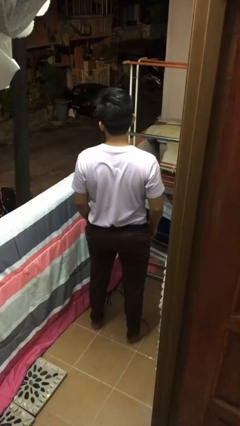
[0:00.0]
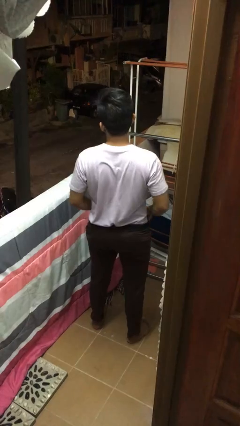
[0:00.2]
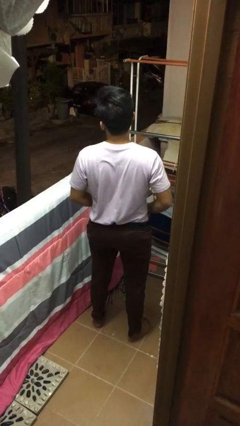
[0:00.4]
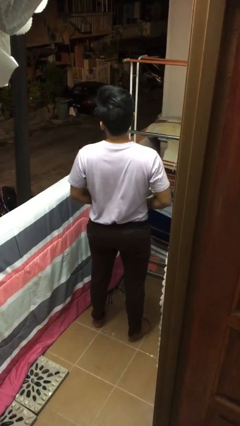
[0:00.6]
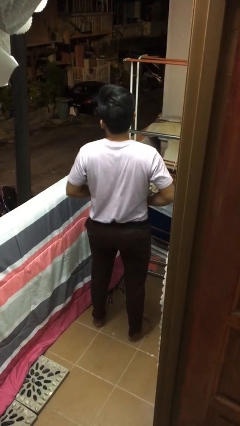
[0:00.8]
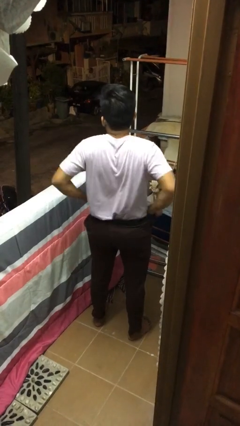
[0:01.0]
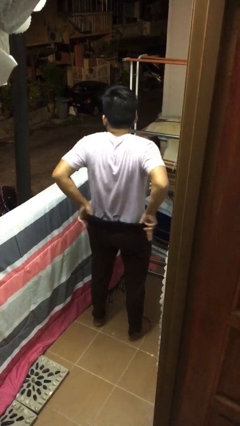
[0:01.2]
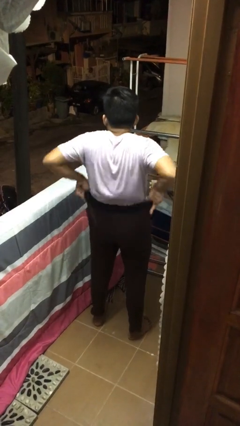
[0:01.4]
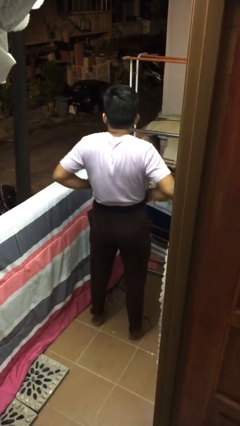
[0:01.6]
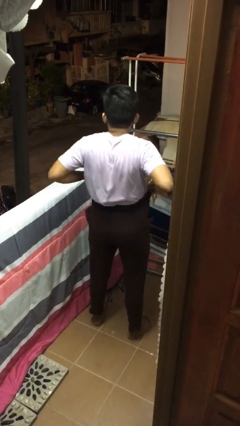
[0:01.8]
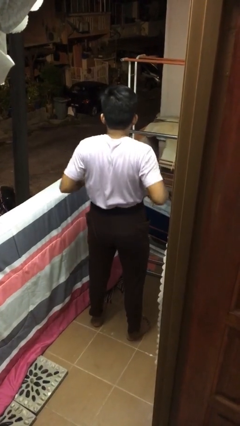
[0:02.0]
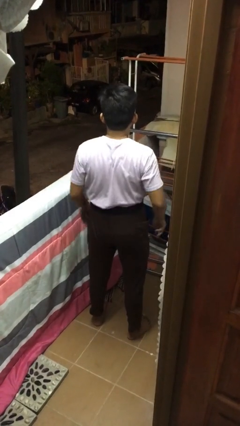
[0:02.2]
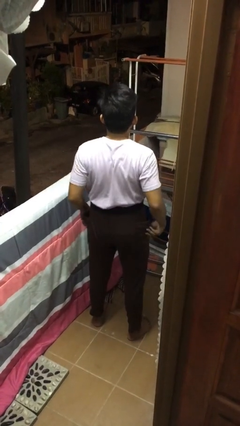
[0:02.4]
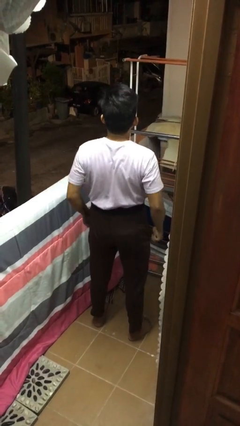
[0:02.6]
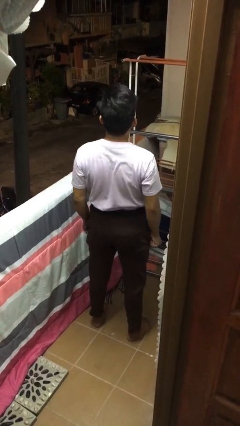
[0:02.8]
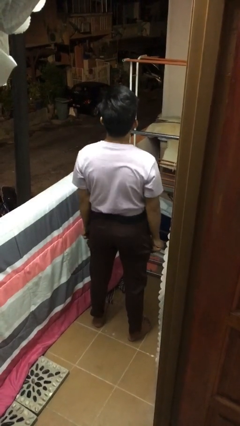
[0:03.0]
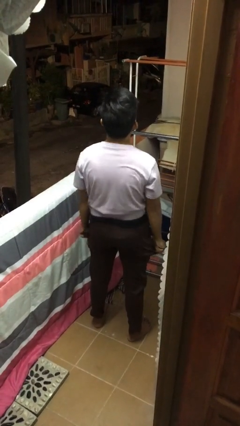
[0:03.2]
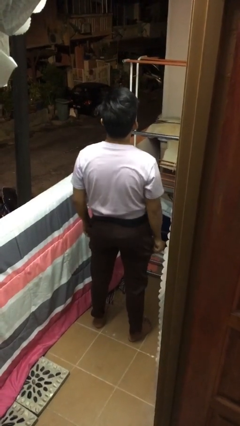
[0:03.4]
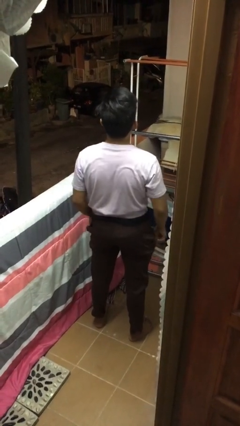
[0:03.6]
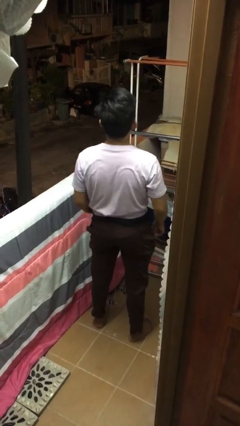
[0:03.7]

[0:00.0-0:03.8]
person hikes up pants

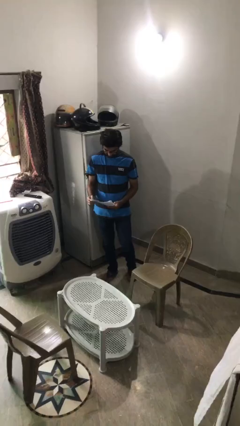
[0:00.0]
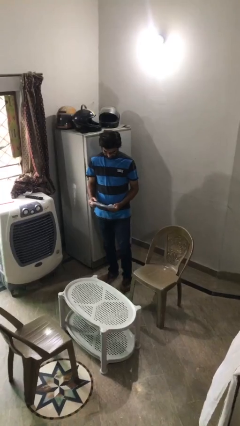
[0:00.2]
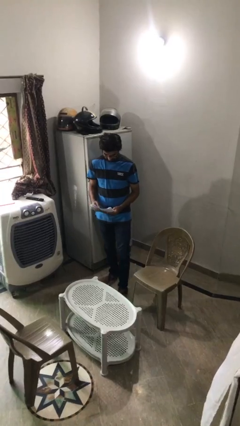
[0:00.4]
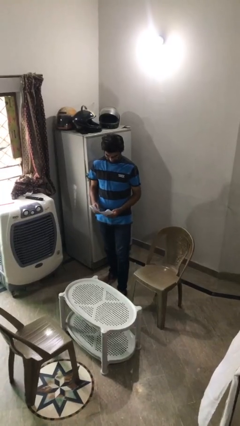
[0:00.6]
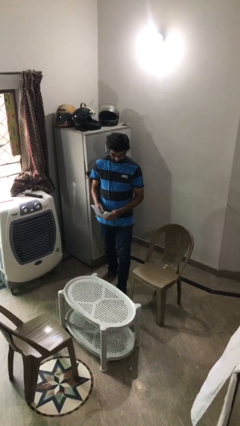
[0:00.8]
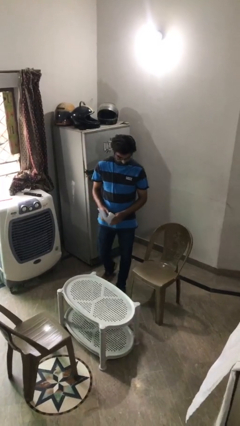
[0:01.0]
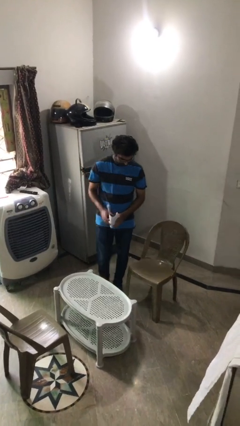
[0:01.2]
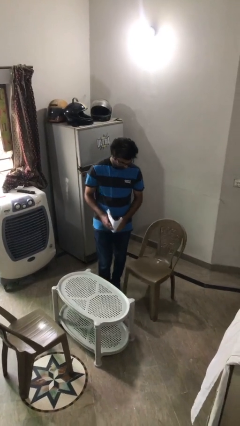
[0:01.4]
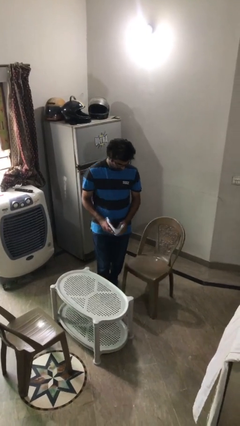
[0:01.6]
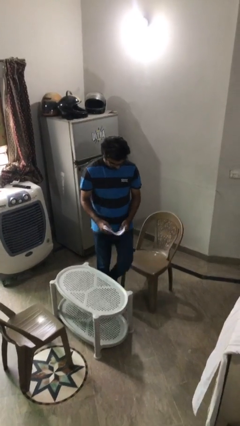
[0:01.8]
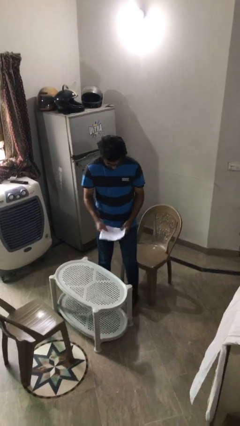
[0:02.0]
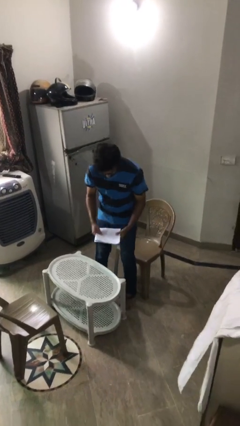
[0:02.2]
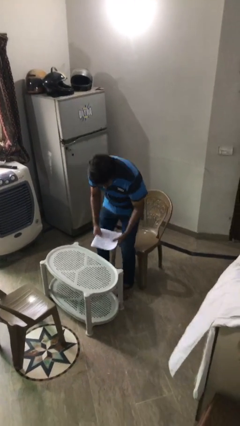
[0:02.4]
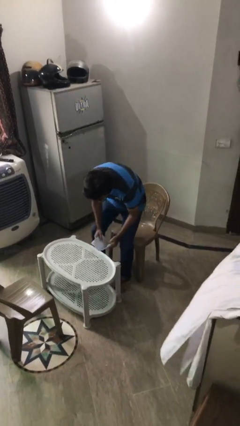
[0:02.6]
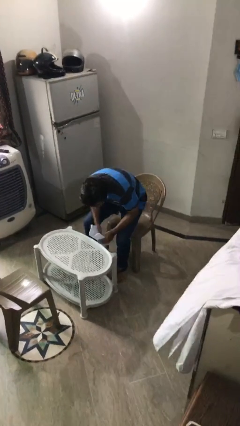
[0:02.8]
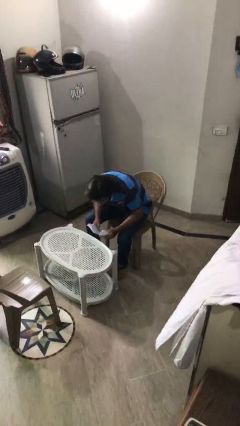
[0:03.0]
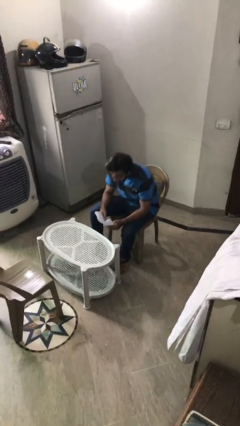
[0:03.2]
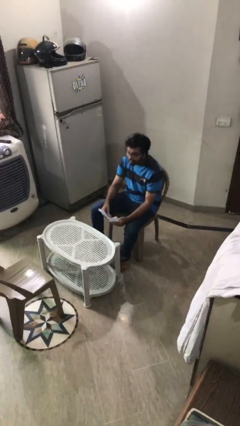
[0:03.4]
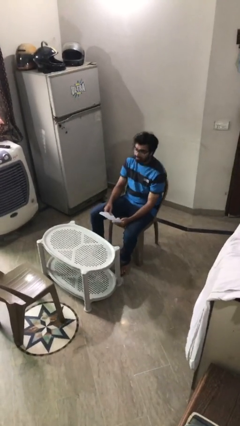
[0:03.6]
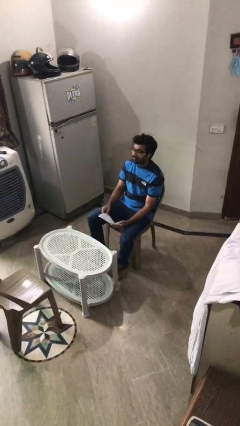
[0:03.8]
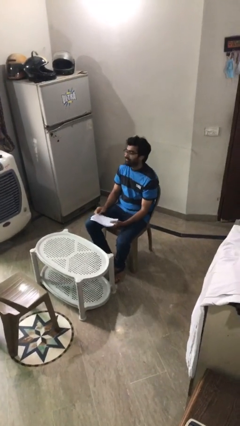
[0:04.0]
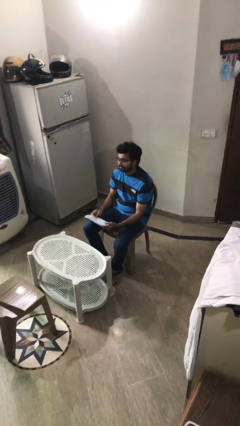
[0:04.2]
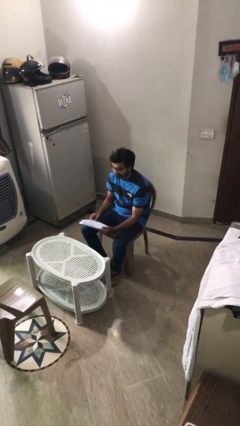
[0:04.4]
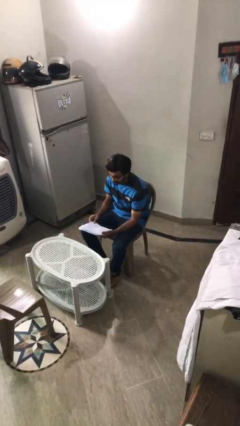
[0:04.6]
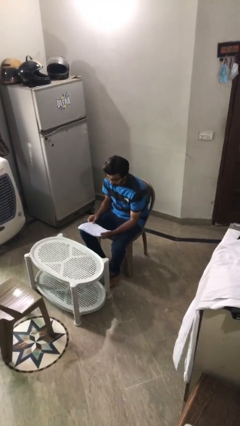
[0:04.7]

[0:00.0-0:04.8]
person sits down

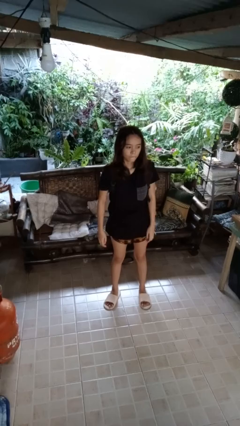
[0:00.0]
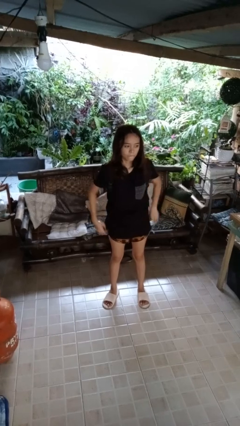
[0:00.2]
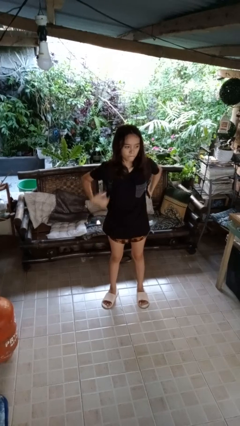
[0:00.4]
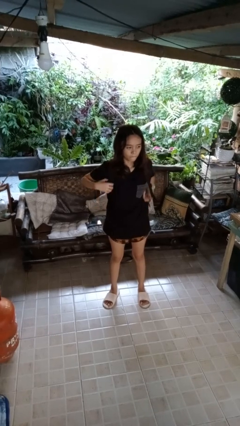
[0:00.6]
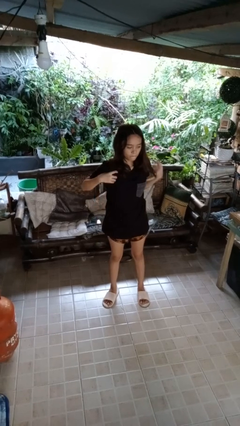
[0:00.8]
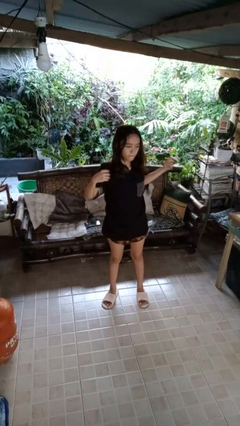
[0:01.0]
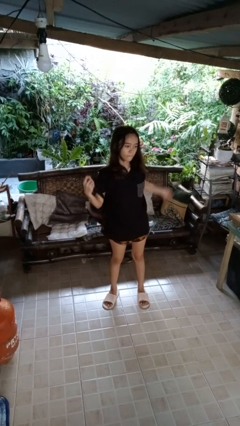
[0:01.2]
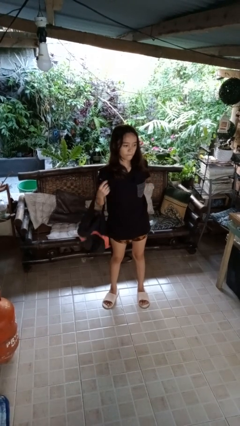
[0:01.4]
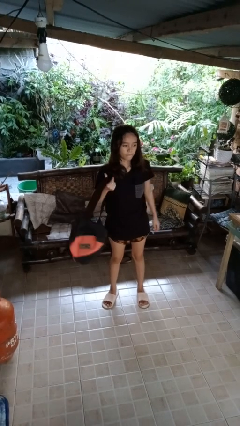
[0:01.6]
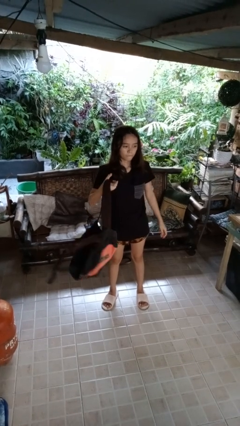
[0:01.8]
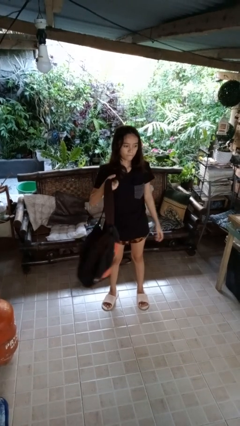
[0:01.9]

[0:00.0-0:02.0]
person takes off backpack

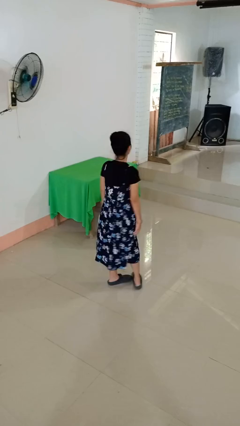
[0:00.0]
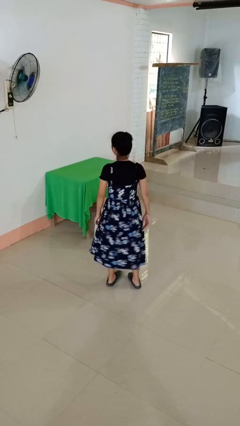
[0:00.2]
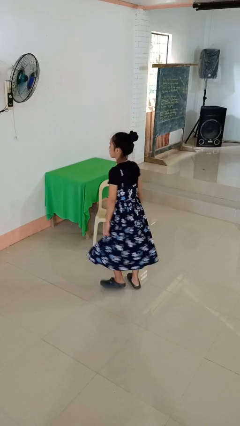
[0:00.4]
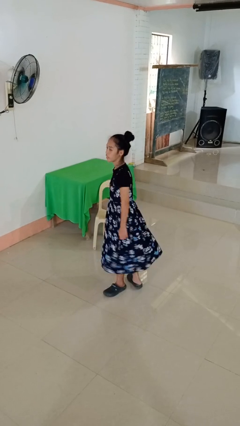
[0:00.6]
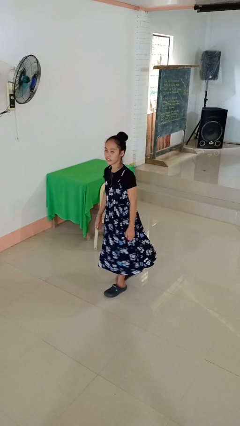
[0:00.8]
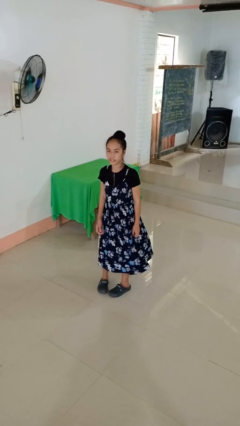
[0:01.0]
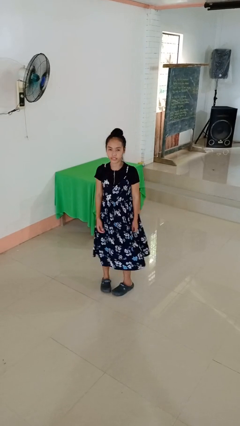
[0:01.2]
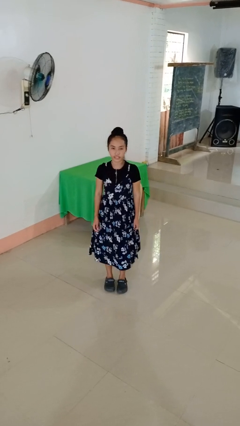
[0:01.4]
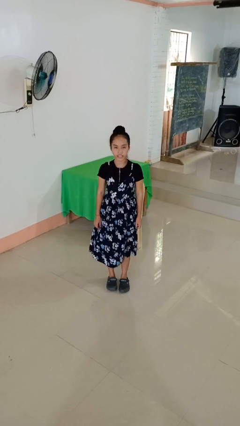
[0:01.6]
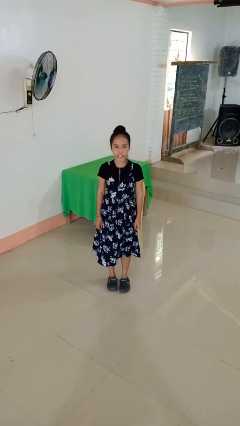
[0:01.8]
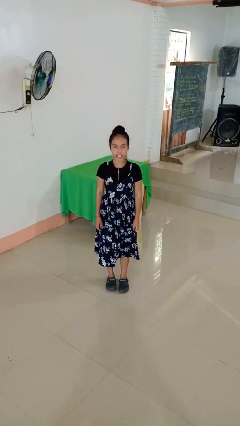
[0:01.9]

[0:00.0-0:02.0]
person twirls

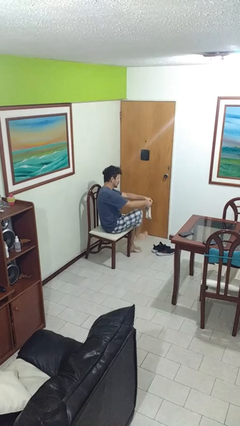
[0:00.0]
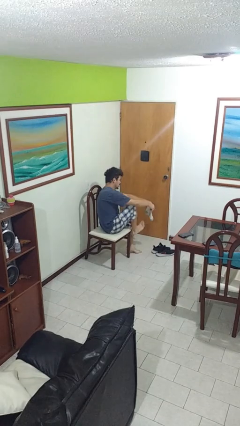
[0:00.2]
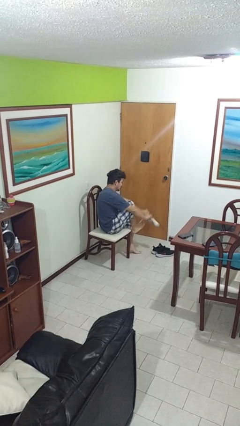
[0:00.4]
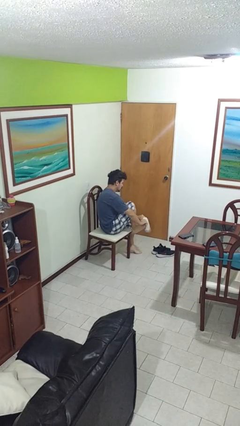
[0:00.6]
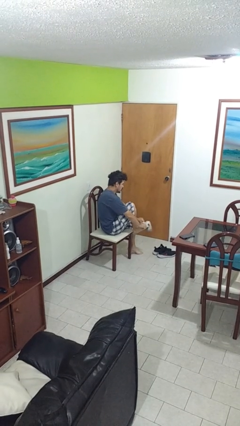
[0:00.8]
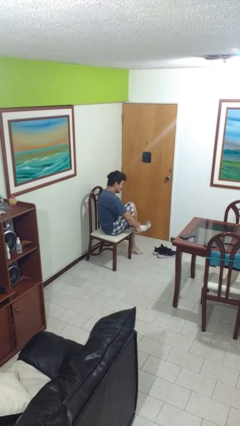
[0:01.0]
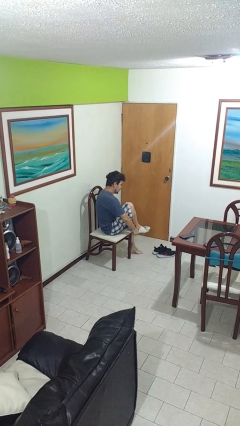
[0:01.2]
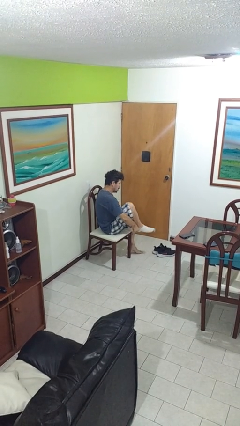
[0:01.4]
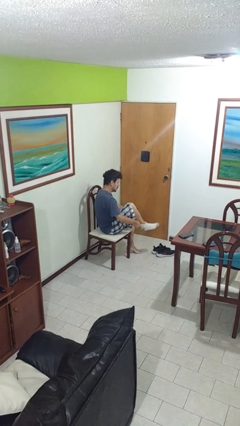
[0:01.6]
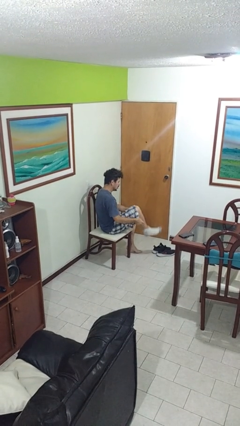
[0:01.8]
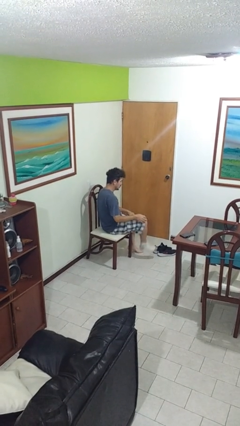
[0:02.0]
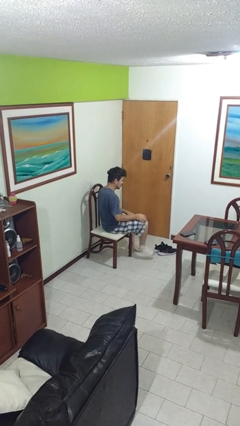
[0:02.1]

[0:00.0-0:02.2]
person puts on socks

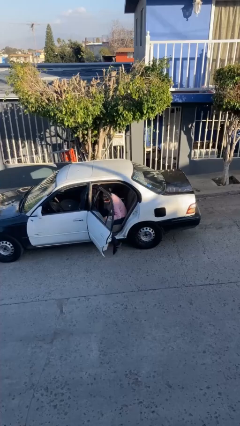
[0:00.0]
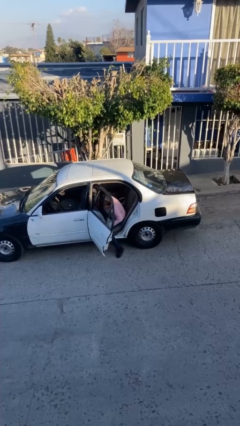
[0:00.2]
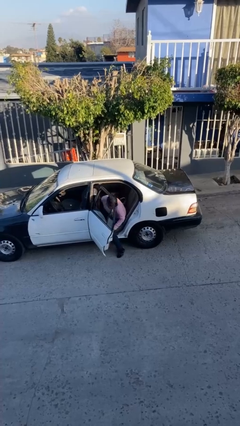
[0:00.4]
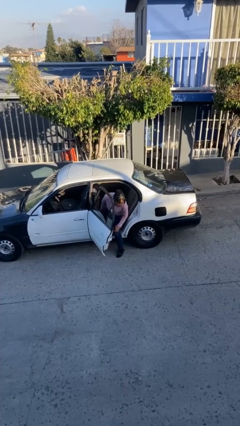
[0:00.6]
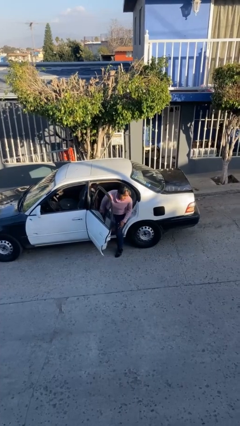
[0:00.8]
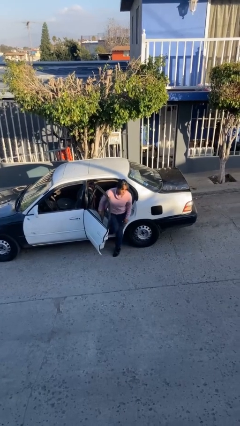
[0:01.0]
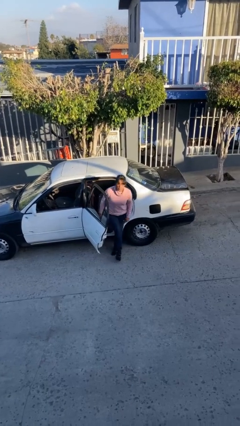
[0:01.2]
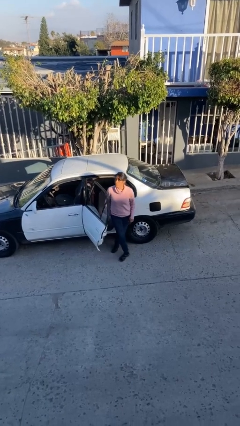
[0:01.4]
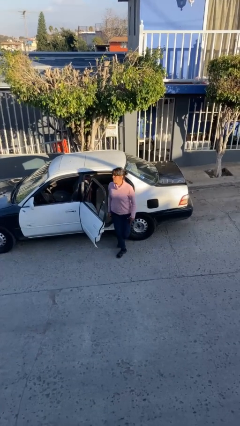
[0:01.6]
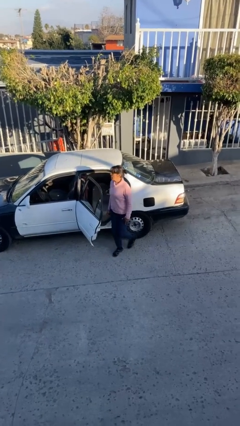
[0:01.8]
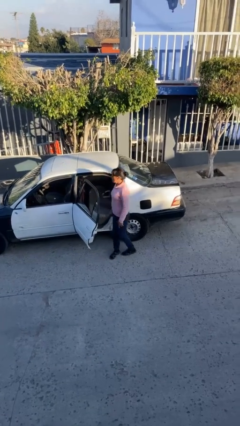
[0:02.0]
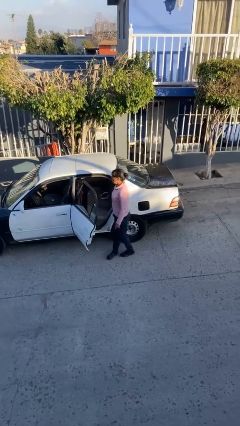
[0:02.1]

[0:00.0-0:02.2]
person exits car

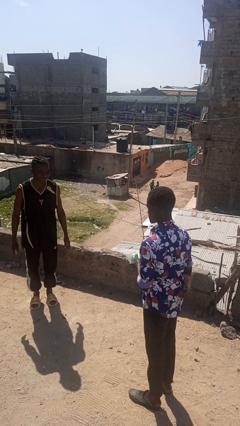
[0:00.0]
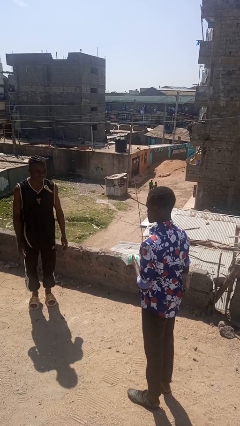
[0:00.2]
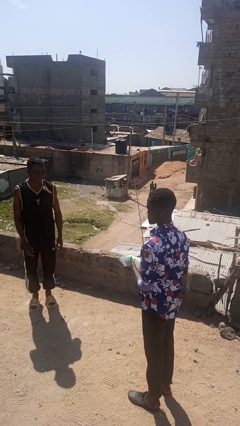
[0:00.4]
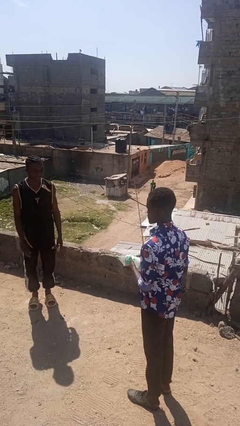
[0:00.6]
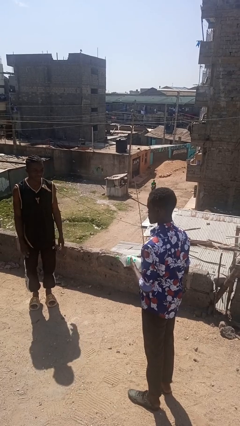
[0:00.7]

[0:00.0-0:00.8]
person catches object from person
